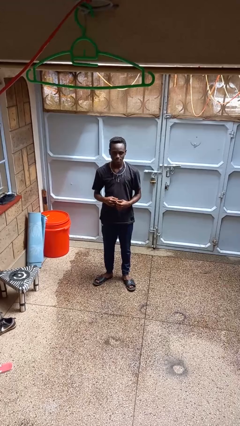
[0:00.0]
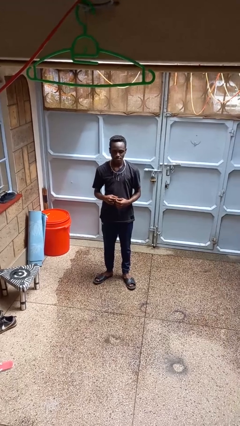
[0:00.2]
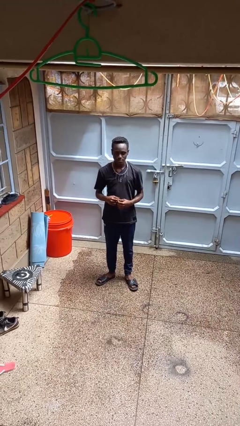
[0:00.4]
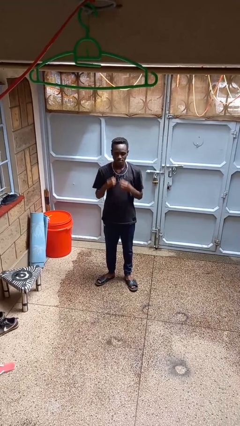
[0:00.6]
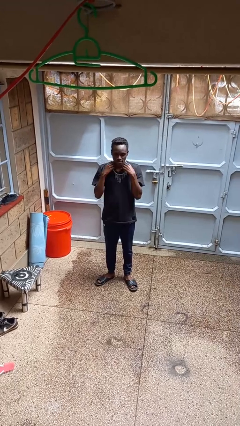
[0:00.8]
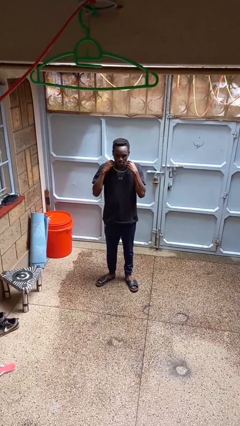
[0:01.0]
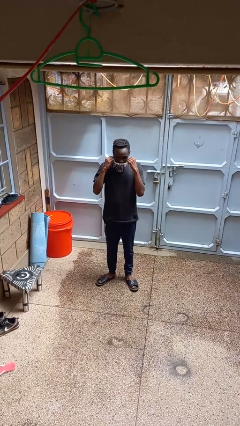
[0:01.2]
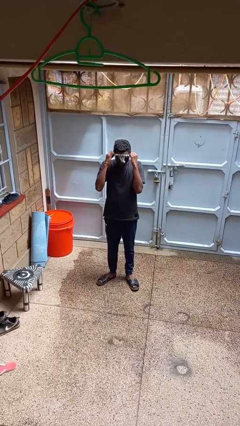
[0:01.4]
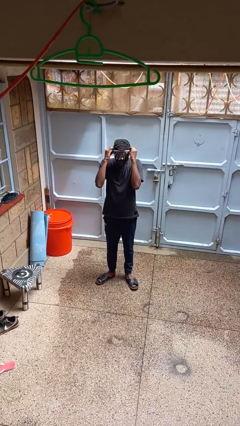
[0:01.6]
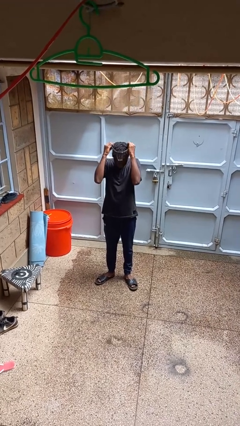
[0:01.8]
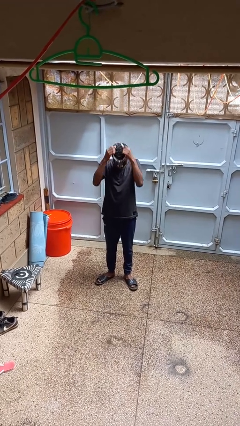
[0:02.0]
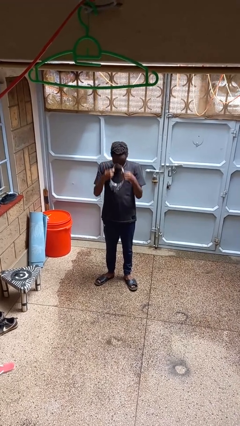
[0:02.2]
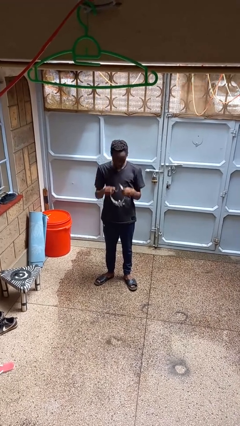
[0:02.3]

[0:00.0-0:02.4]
person takes off necklace

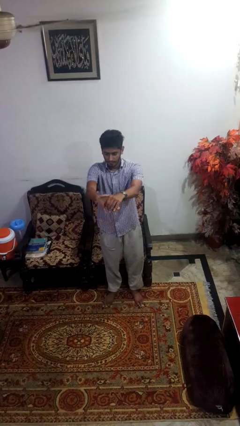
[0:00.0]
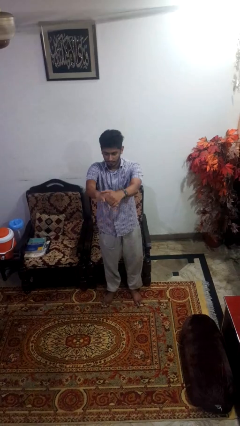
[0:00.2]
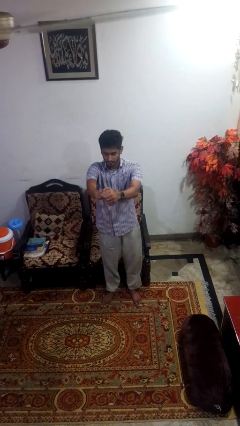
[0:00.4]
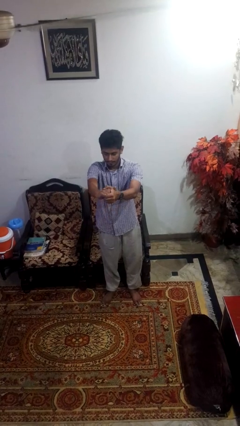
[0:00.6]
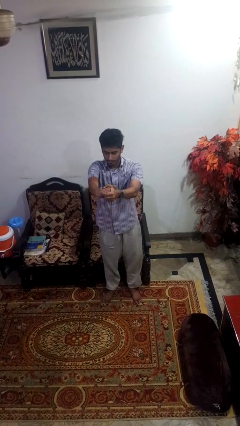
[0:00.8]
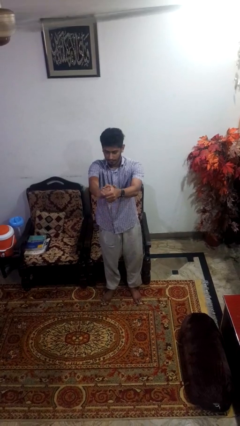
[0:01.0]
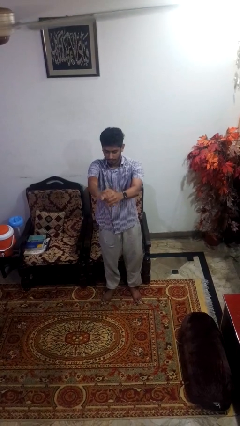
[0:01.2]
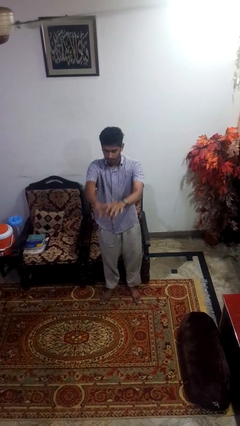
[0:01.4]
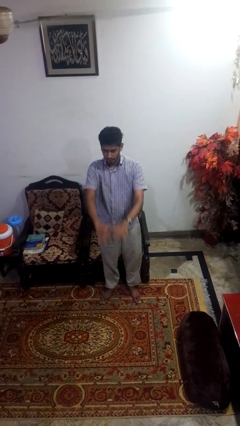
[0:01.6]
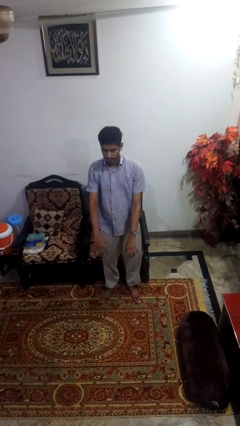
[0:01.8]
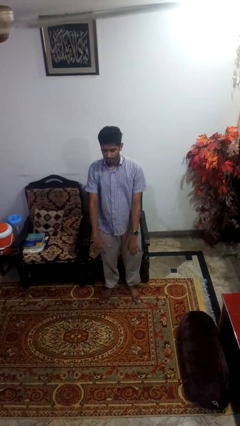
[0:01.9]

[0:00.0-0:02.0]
person cracks knuckles

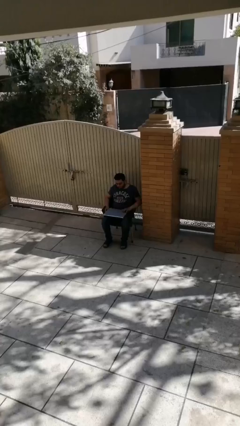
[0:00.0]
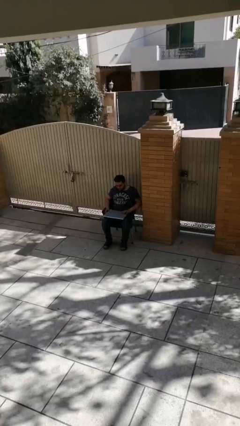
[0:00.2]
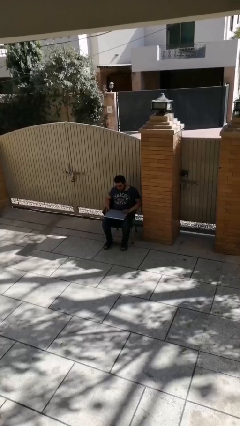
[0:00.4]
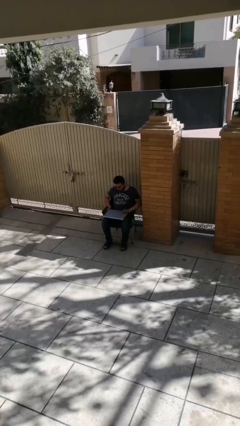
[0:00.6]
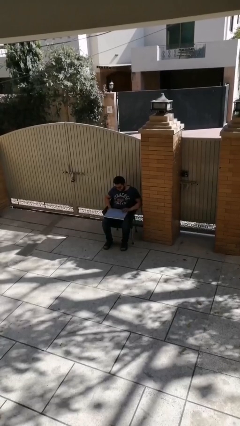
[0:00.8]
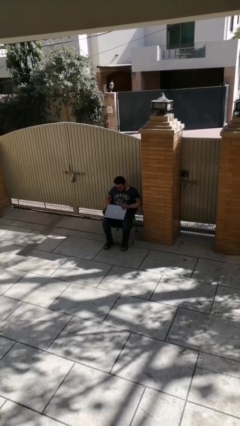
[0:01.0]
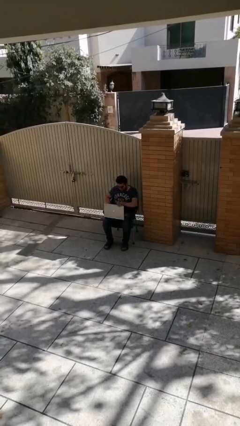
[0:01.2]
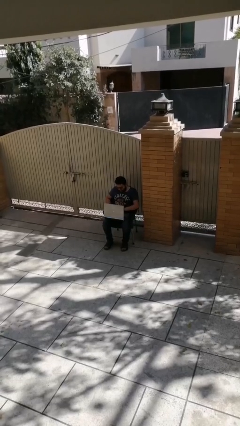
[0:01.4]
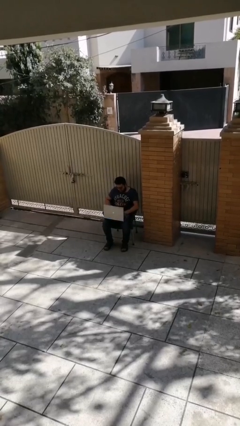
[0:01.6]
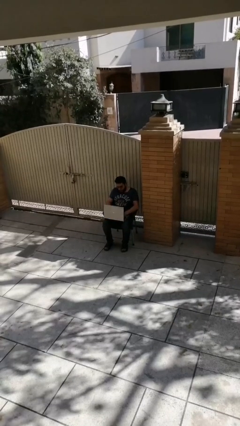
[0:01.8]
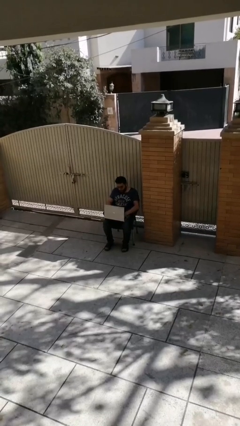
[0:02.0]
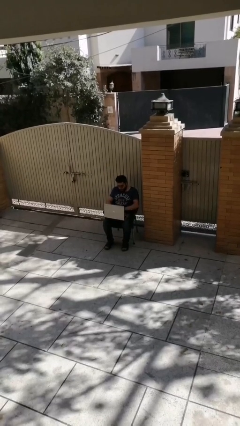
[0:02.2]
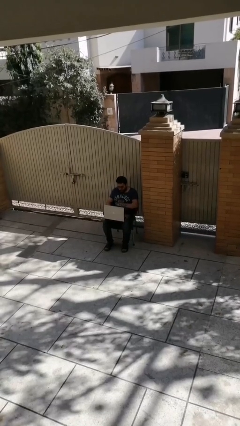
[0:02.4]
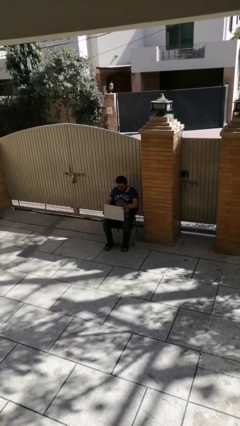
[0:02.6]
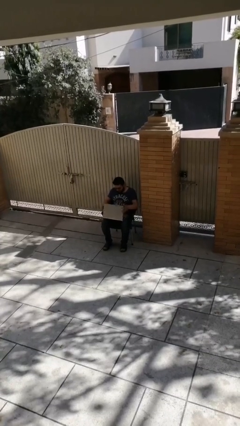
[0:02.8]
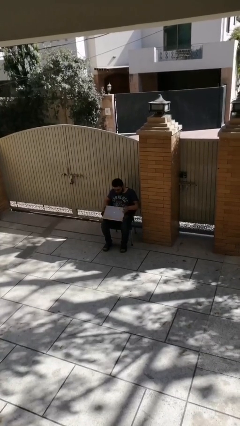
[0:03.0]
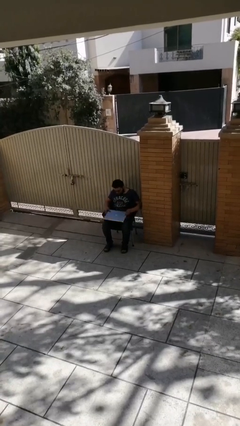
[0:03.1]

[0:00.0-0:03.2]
person interacts with laptop

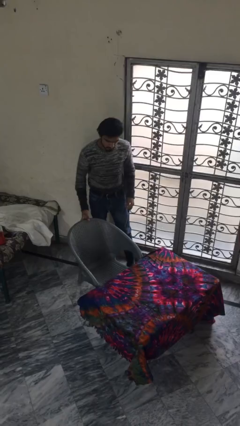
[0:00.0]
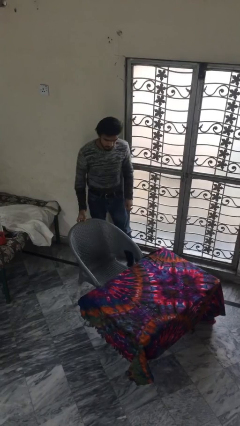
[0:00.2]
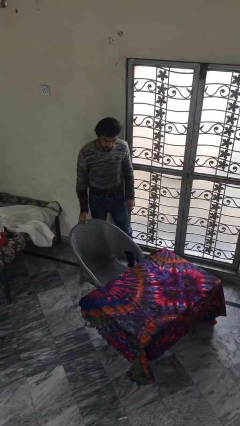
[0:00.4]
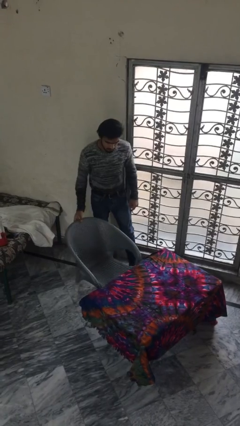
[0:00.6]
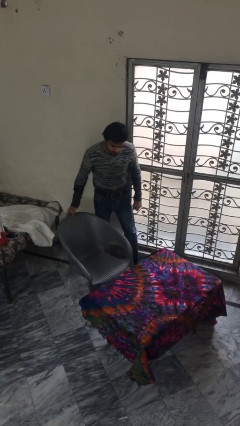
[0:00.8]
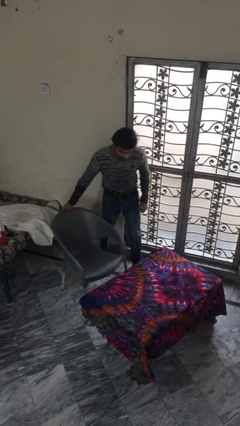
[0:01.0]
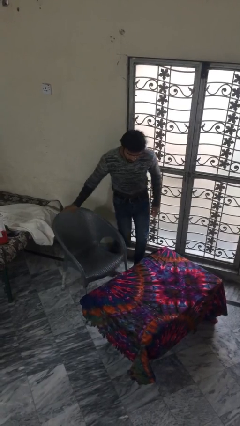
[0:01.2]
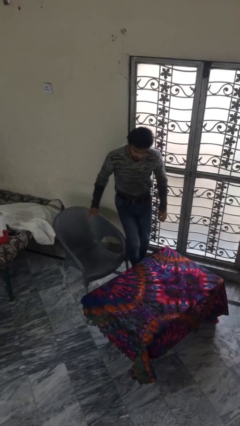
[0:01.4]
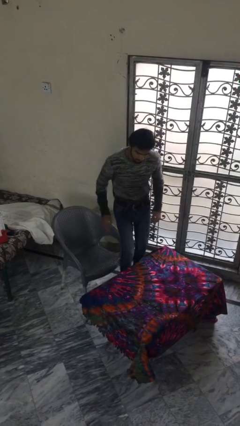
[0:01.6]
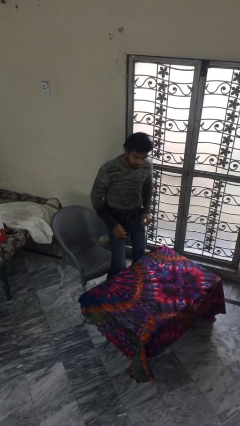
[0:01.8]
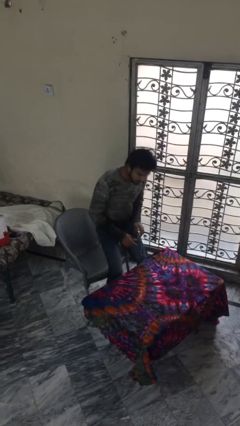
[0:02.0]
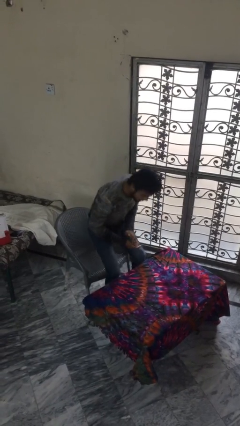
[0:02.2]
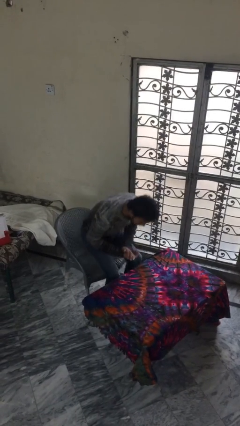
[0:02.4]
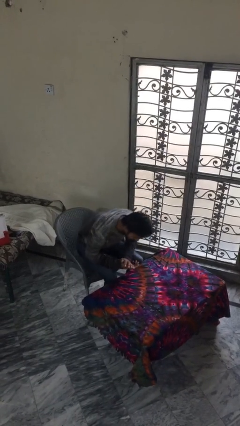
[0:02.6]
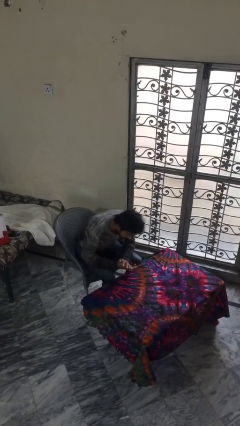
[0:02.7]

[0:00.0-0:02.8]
person sits down

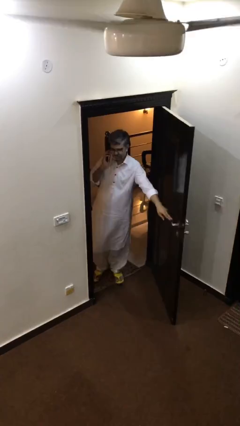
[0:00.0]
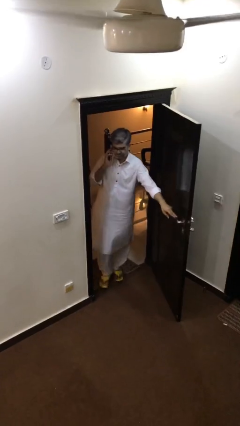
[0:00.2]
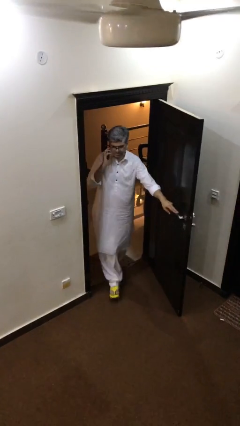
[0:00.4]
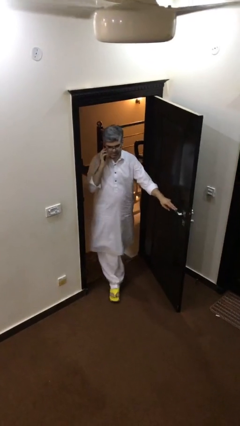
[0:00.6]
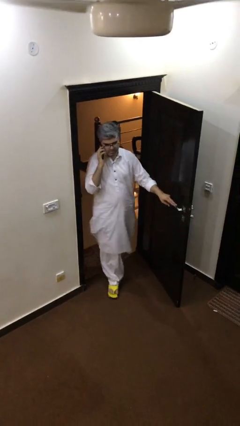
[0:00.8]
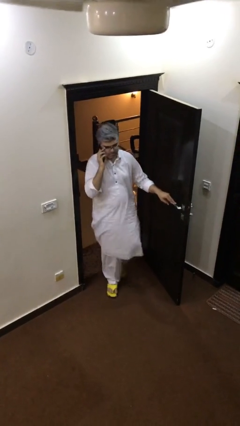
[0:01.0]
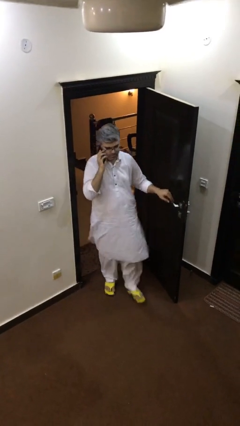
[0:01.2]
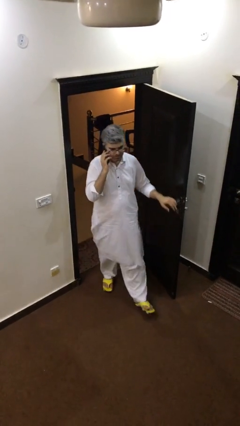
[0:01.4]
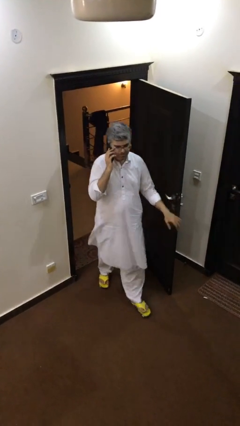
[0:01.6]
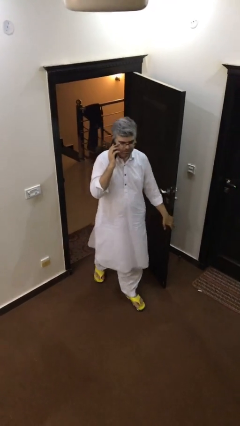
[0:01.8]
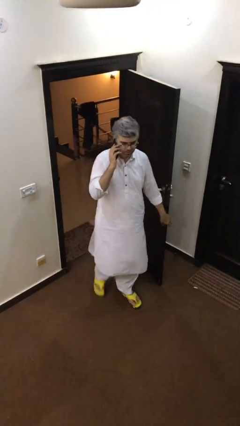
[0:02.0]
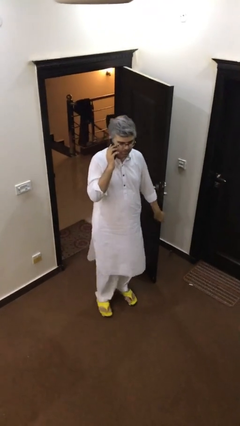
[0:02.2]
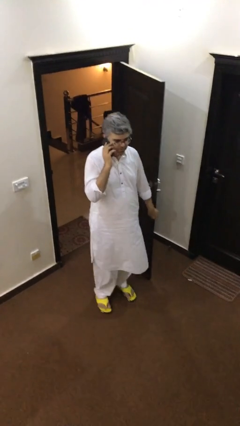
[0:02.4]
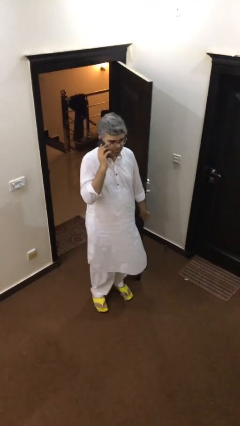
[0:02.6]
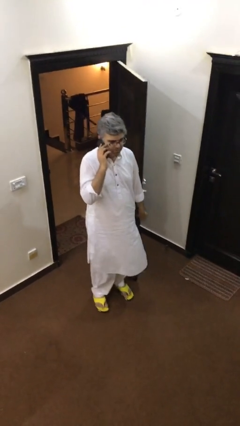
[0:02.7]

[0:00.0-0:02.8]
person enters scene through structure

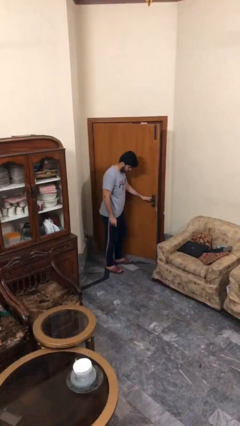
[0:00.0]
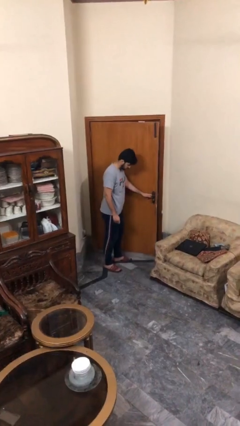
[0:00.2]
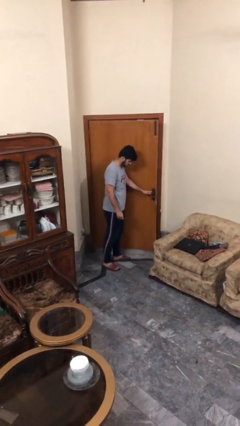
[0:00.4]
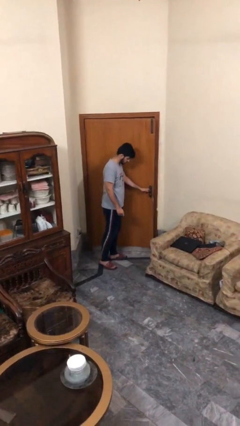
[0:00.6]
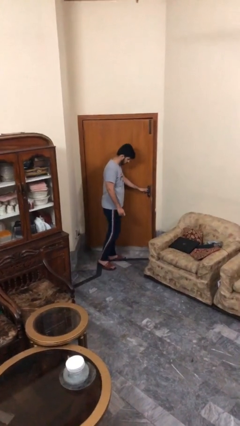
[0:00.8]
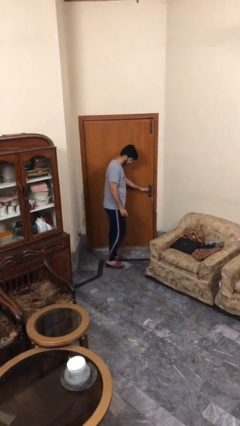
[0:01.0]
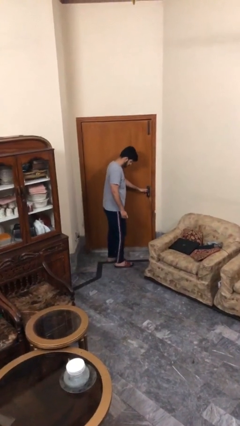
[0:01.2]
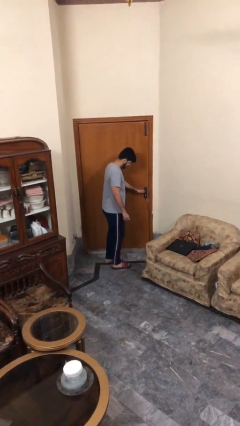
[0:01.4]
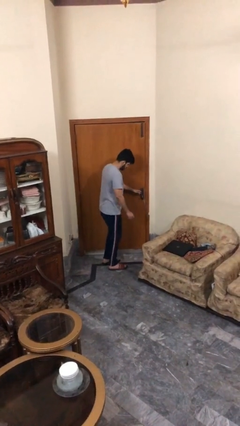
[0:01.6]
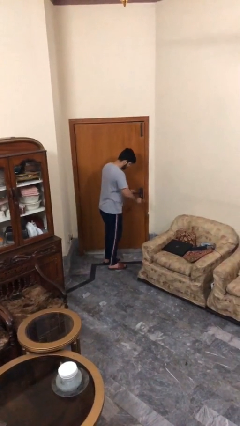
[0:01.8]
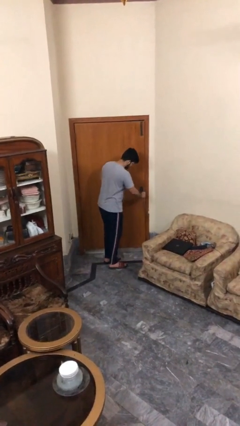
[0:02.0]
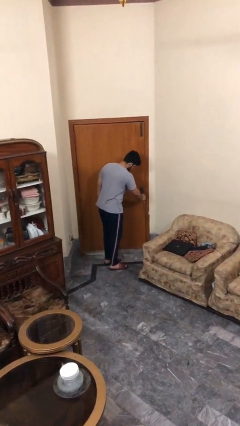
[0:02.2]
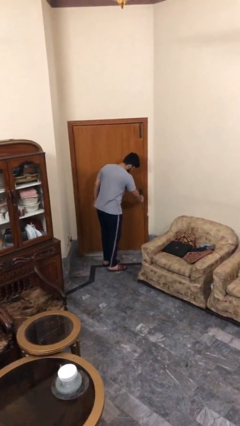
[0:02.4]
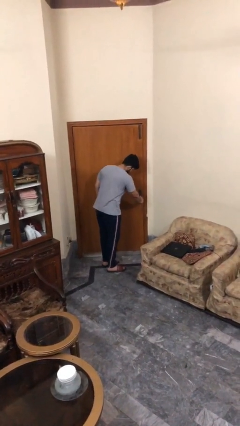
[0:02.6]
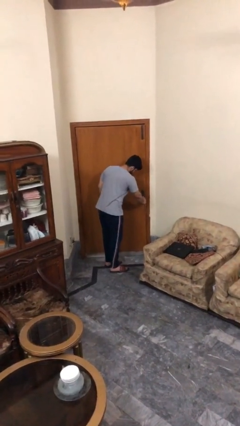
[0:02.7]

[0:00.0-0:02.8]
person closes facility door

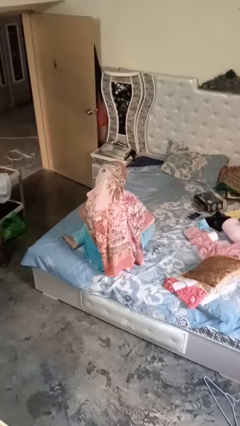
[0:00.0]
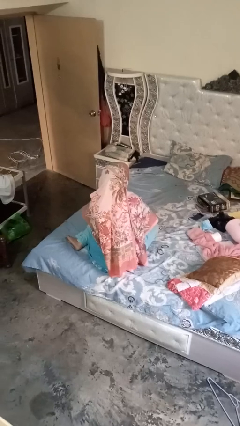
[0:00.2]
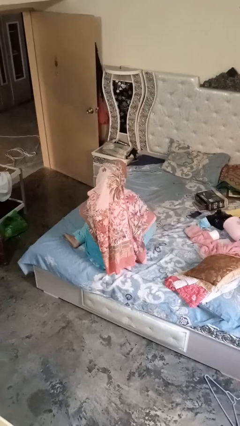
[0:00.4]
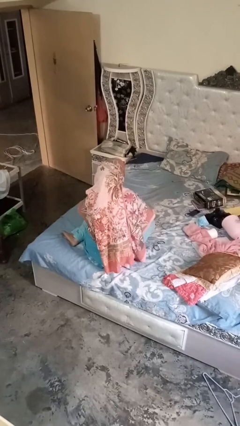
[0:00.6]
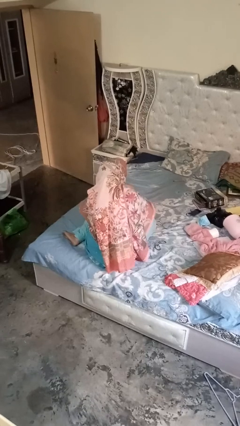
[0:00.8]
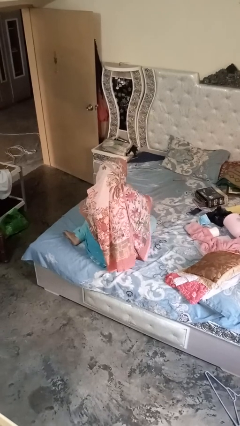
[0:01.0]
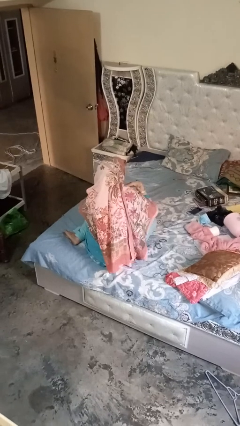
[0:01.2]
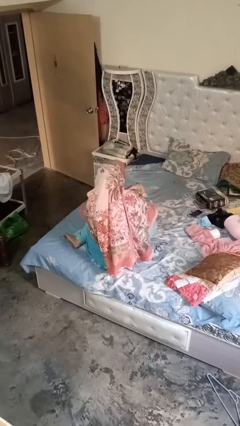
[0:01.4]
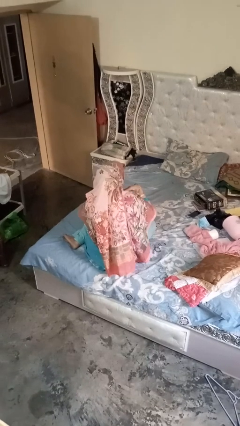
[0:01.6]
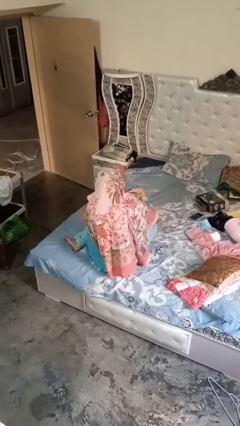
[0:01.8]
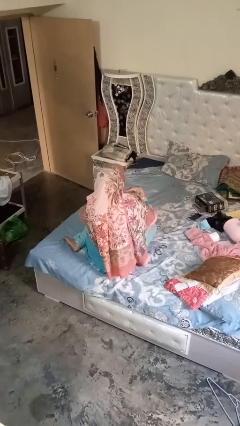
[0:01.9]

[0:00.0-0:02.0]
person gestures cut
